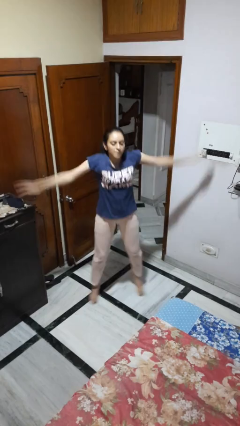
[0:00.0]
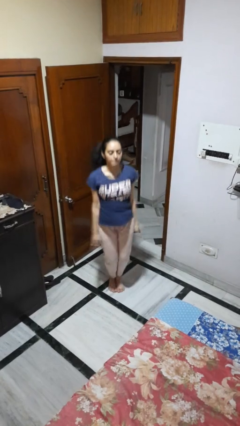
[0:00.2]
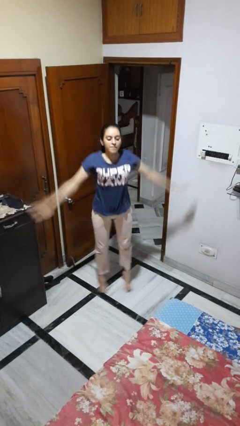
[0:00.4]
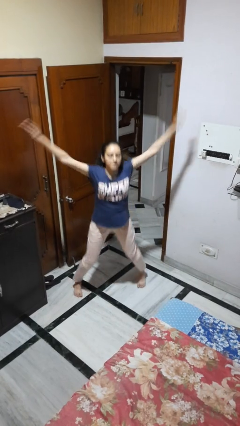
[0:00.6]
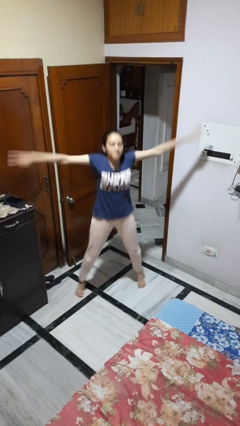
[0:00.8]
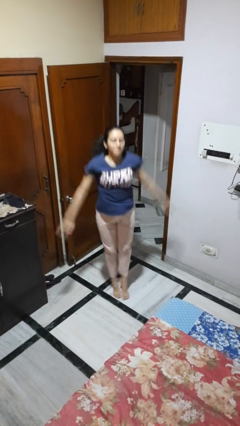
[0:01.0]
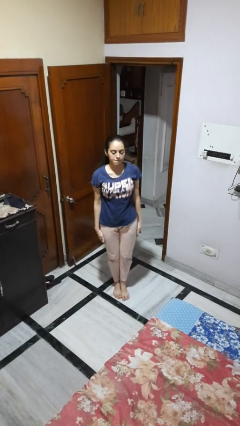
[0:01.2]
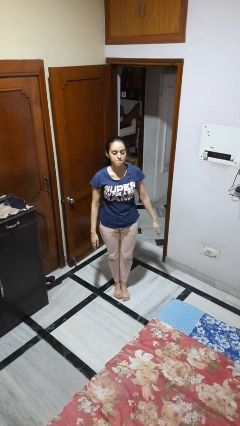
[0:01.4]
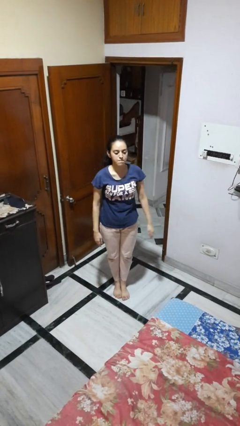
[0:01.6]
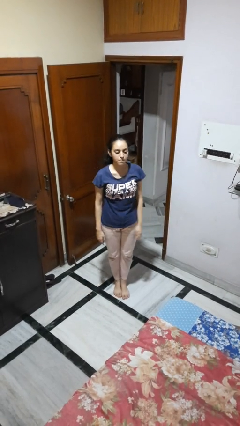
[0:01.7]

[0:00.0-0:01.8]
person exercises with jumping jacks

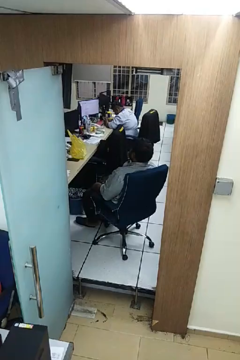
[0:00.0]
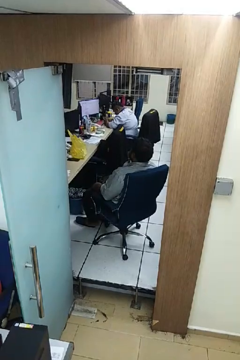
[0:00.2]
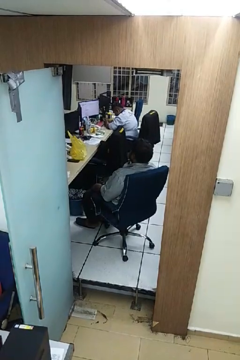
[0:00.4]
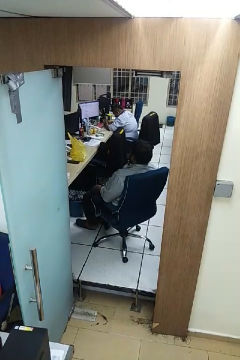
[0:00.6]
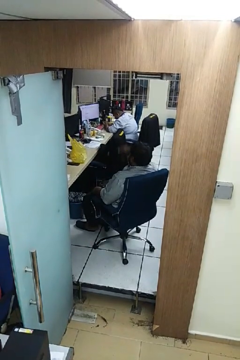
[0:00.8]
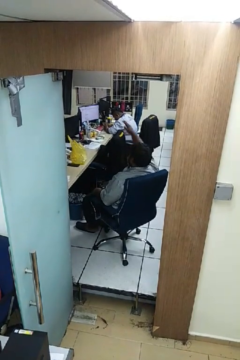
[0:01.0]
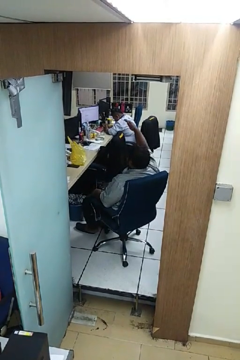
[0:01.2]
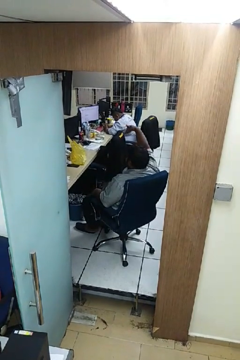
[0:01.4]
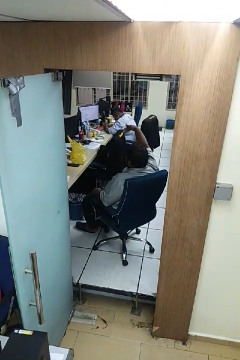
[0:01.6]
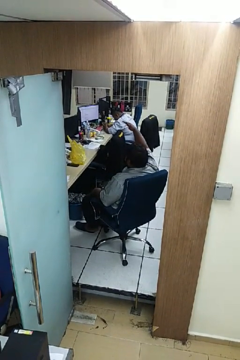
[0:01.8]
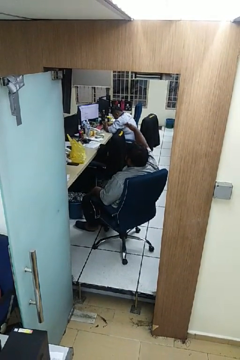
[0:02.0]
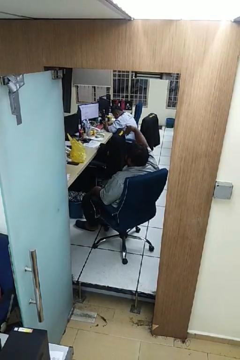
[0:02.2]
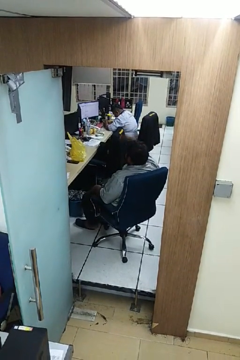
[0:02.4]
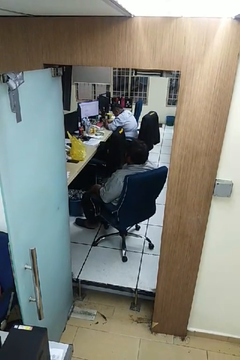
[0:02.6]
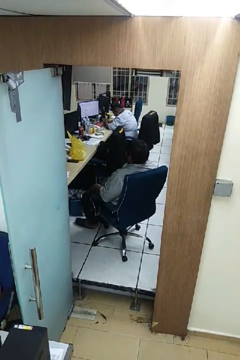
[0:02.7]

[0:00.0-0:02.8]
person gestures come here

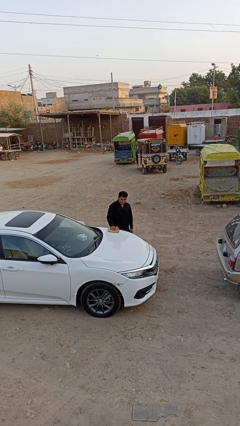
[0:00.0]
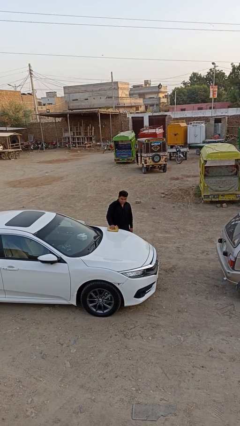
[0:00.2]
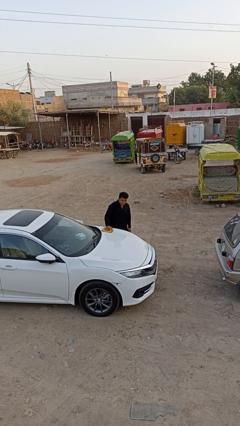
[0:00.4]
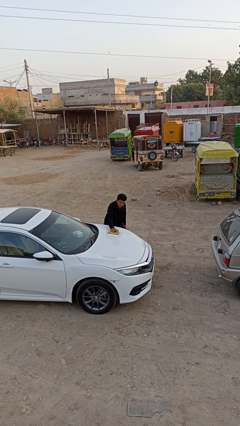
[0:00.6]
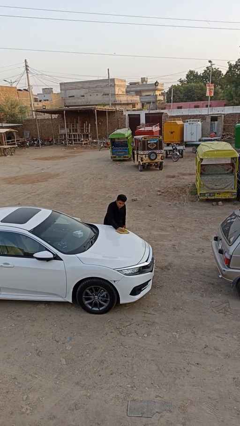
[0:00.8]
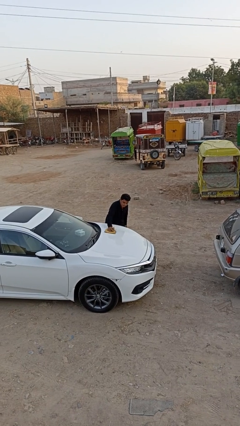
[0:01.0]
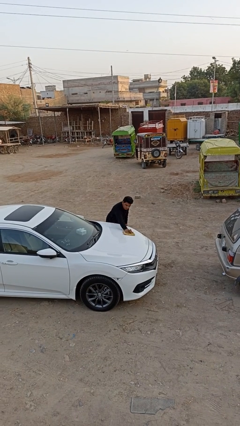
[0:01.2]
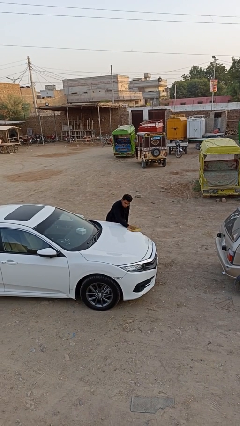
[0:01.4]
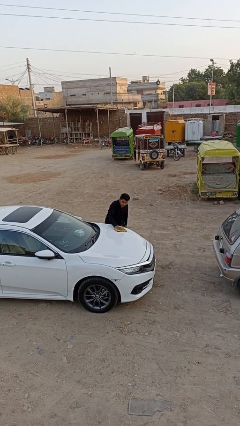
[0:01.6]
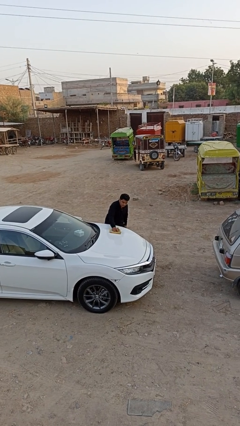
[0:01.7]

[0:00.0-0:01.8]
person polishes car with rag

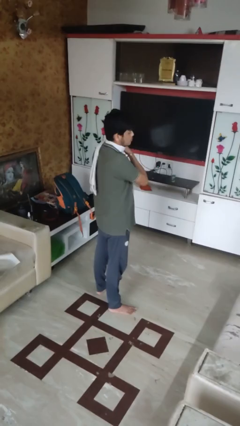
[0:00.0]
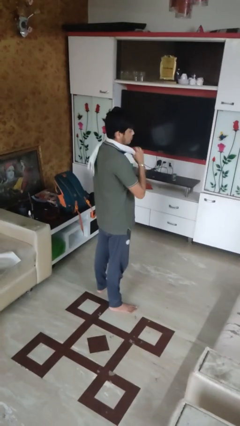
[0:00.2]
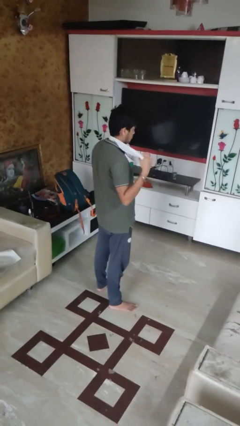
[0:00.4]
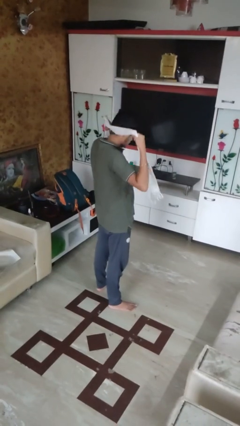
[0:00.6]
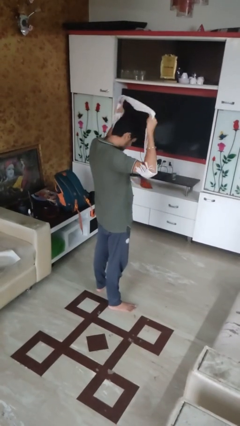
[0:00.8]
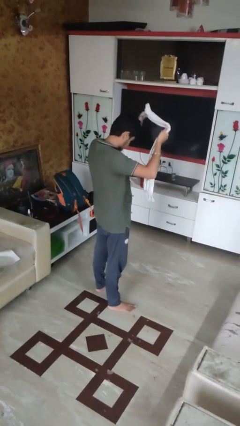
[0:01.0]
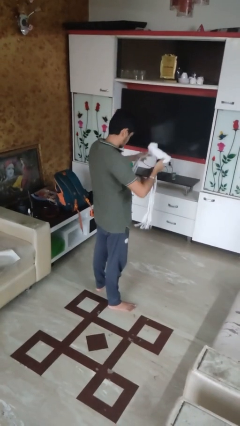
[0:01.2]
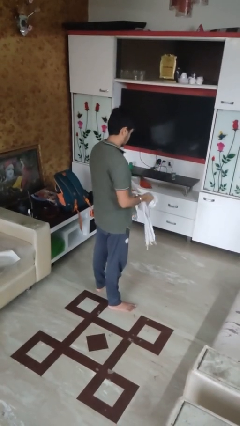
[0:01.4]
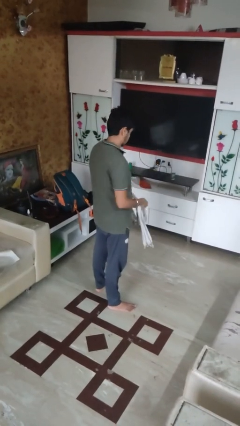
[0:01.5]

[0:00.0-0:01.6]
person takes off scarf

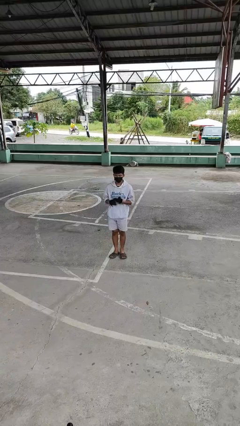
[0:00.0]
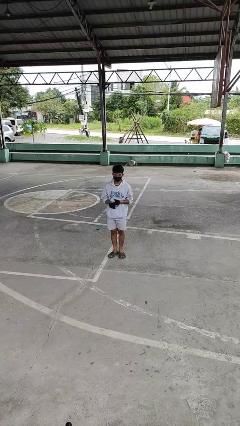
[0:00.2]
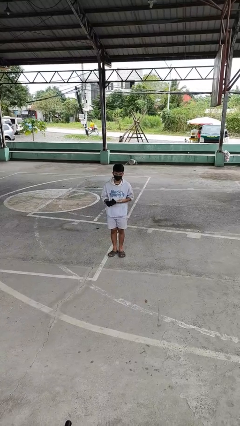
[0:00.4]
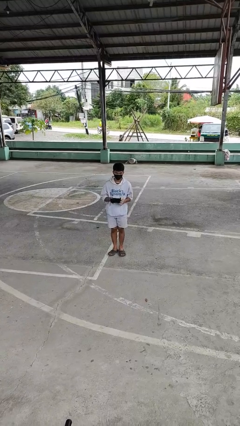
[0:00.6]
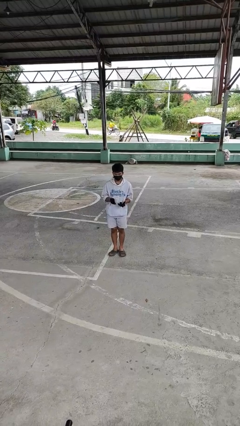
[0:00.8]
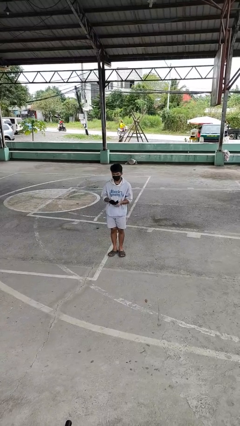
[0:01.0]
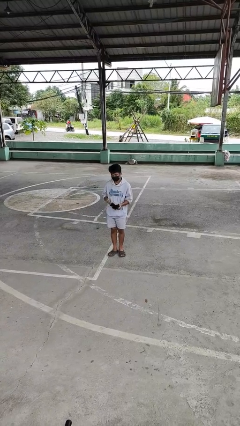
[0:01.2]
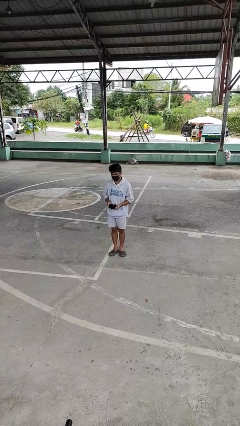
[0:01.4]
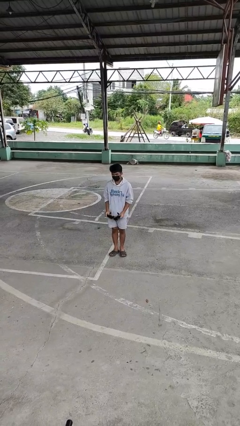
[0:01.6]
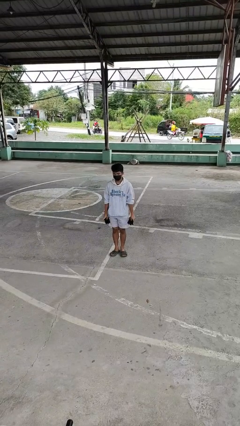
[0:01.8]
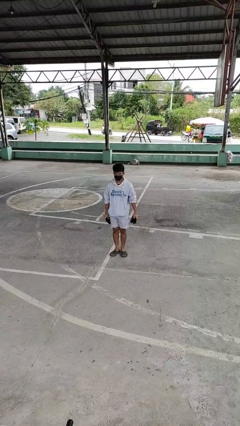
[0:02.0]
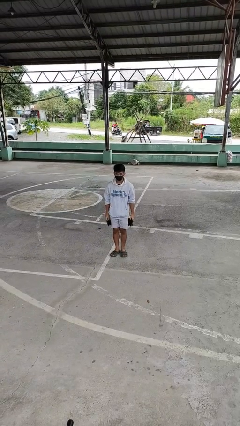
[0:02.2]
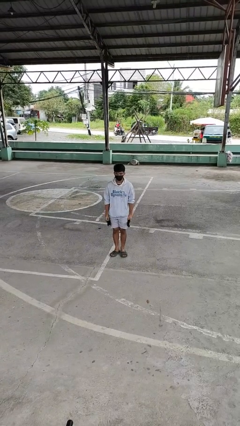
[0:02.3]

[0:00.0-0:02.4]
person takes off gloves

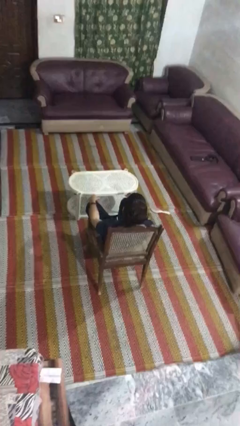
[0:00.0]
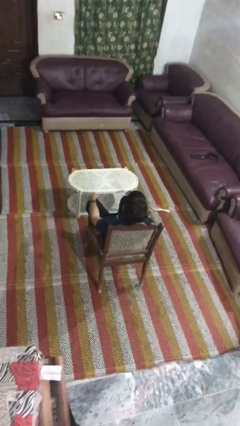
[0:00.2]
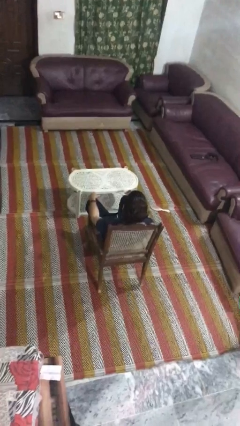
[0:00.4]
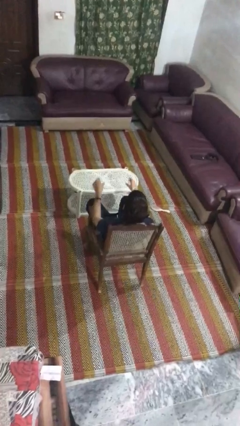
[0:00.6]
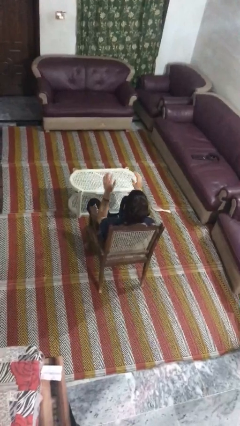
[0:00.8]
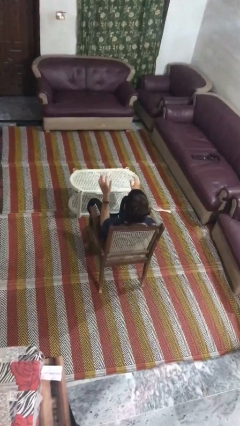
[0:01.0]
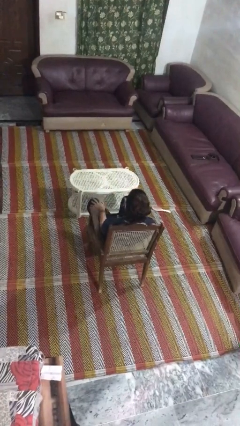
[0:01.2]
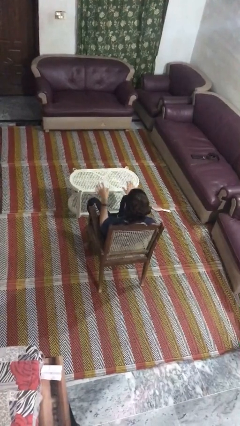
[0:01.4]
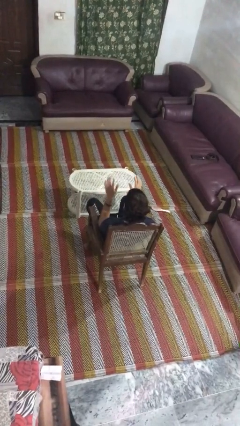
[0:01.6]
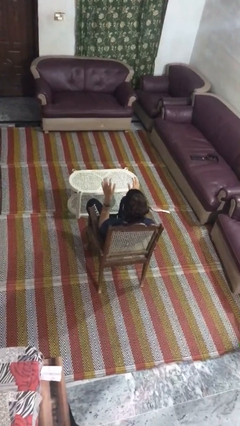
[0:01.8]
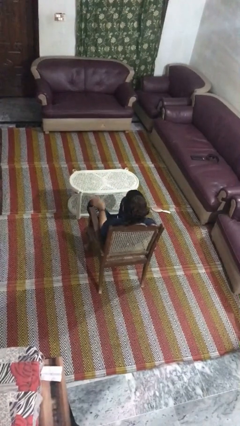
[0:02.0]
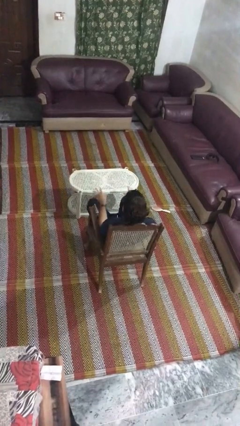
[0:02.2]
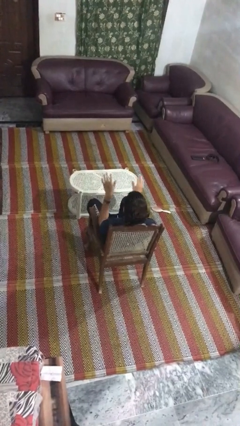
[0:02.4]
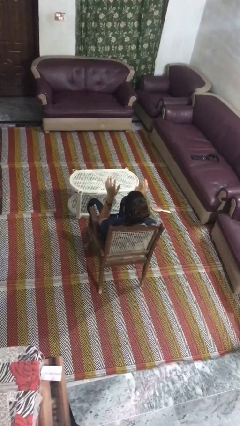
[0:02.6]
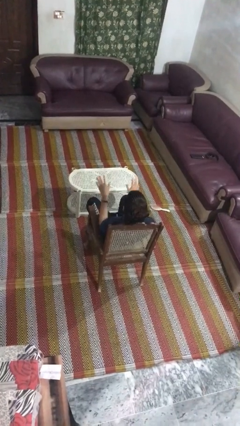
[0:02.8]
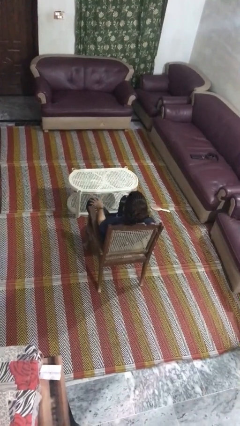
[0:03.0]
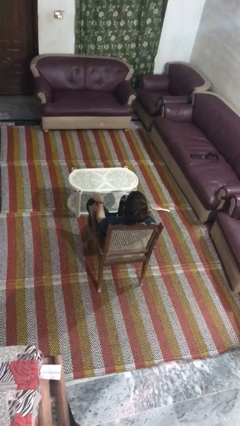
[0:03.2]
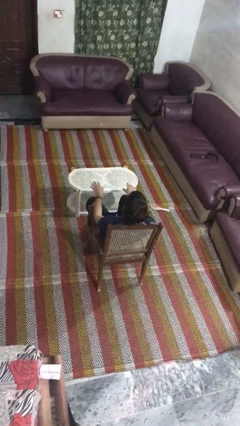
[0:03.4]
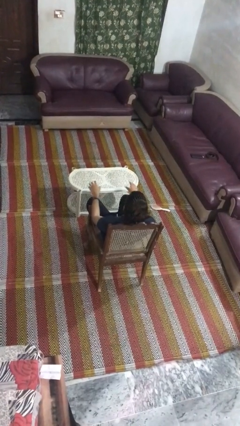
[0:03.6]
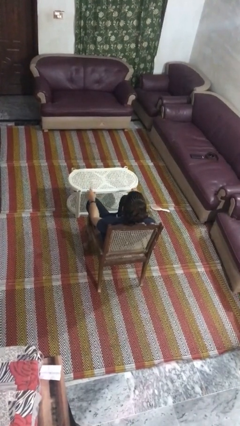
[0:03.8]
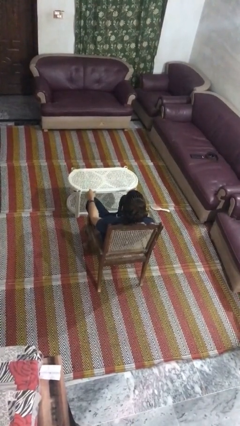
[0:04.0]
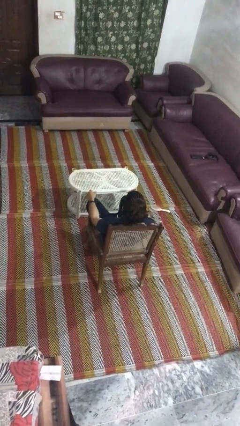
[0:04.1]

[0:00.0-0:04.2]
person slaps hands on thighs

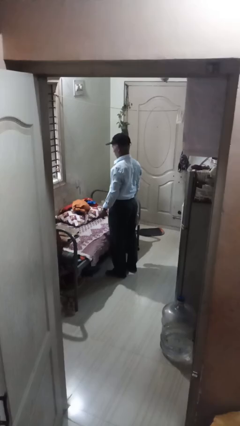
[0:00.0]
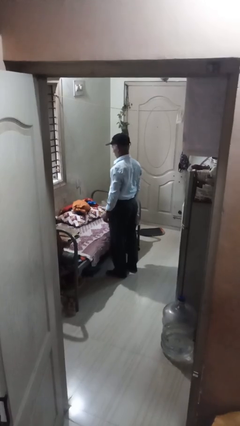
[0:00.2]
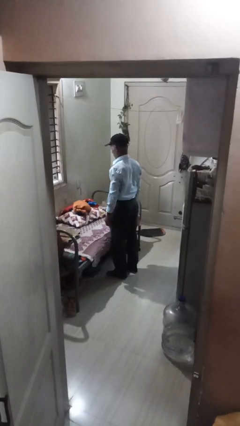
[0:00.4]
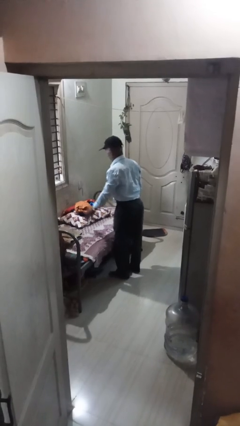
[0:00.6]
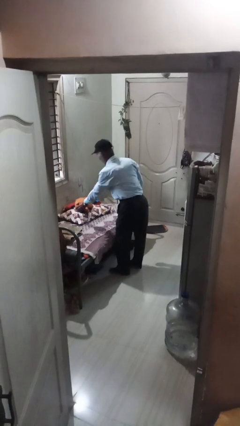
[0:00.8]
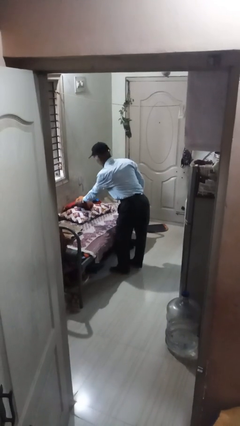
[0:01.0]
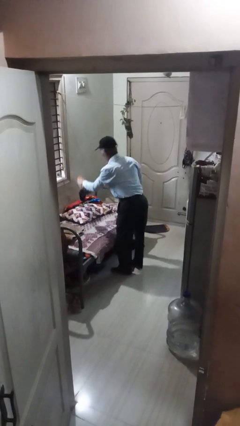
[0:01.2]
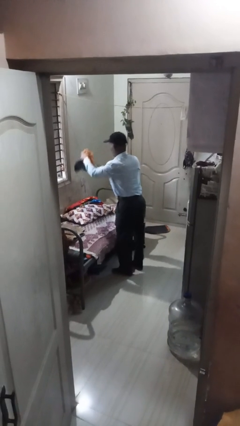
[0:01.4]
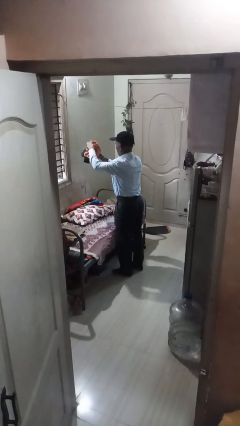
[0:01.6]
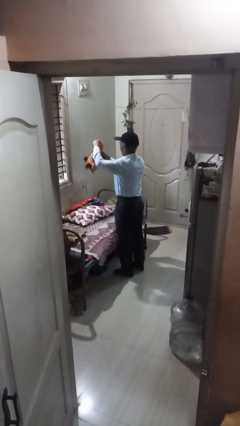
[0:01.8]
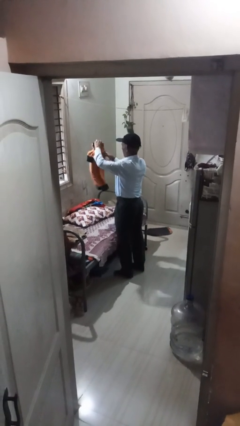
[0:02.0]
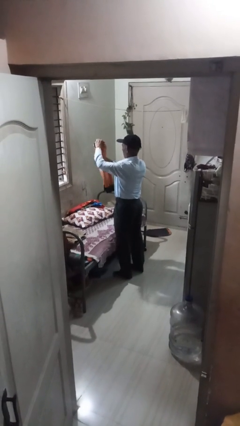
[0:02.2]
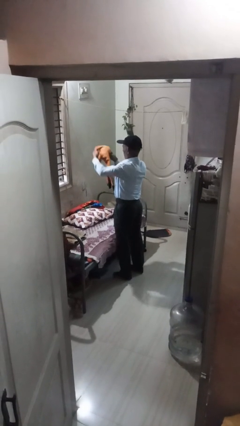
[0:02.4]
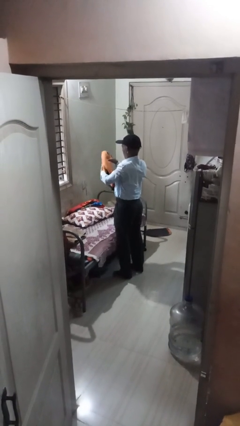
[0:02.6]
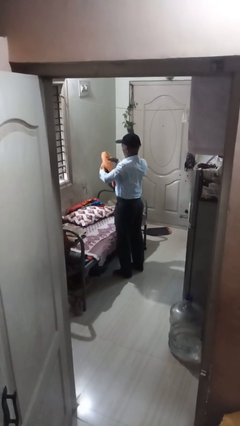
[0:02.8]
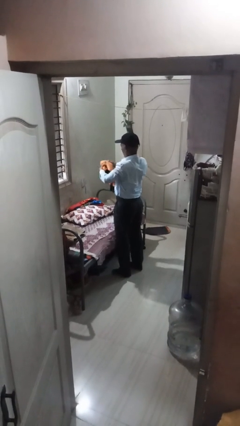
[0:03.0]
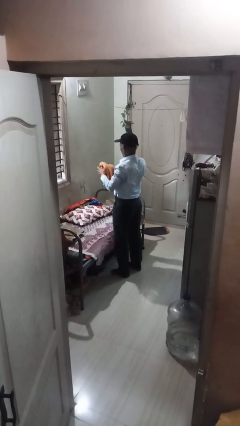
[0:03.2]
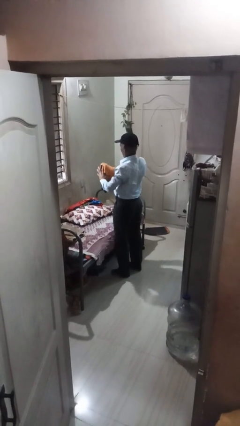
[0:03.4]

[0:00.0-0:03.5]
person folds shirt
